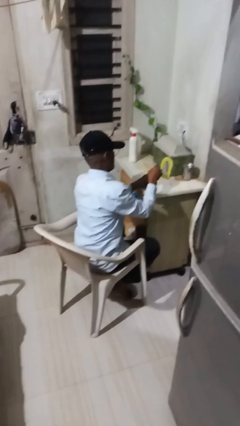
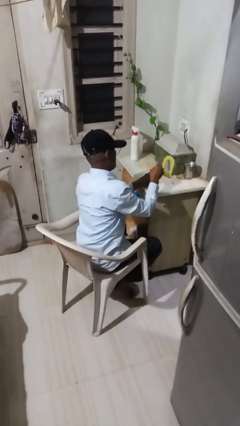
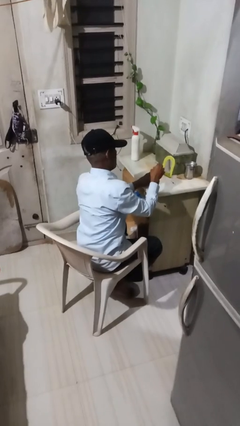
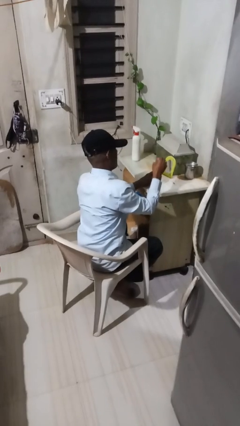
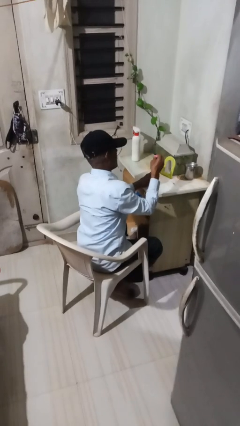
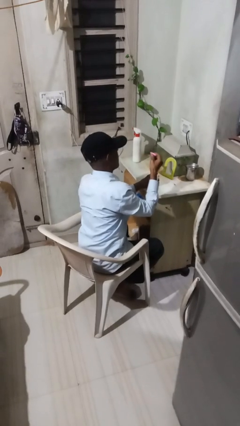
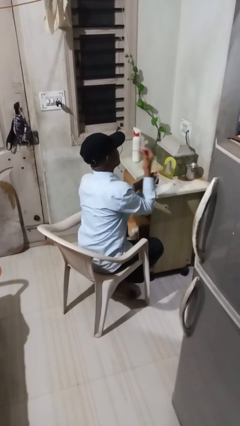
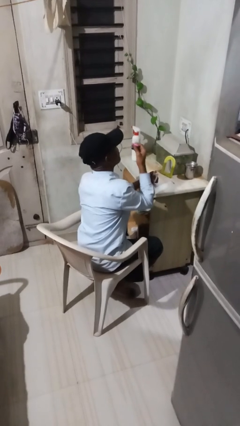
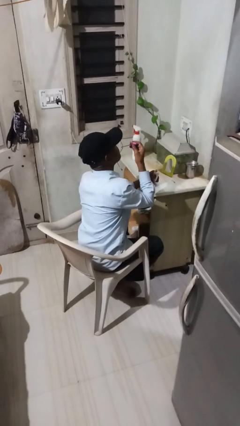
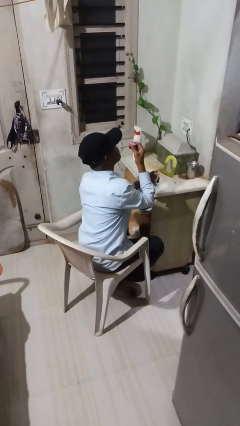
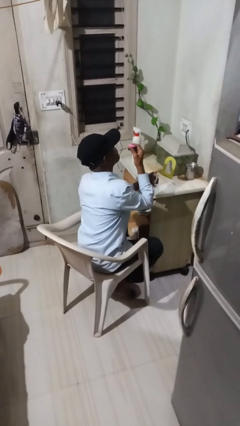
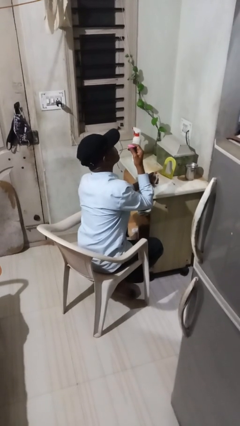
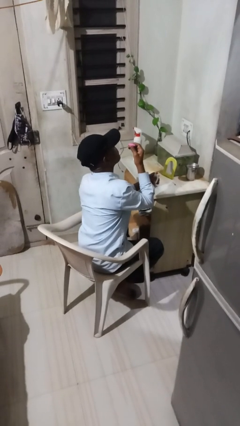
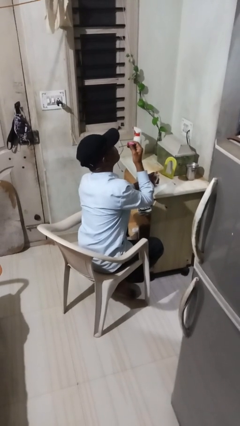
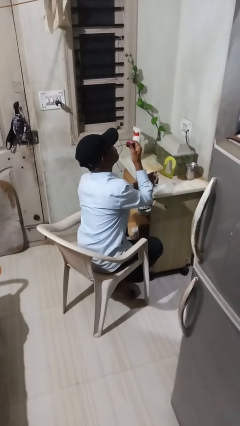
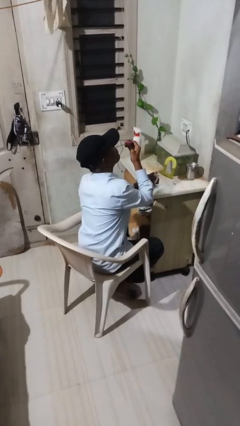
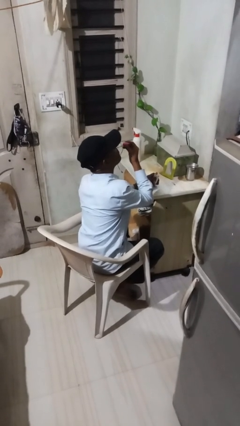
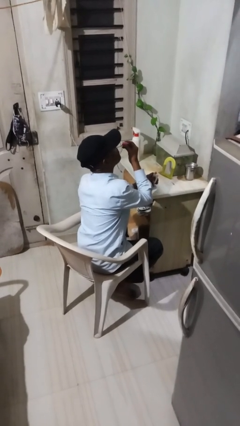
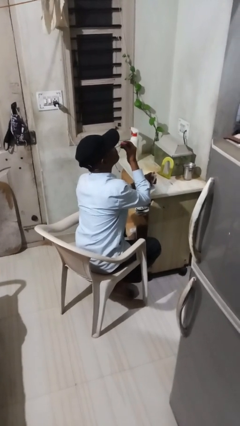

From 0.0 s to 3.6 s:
person applies lip makeup

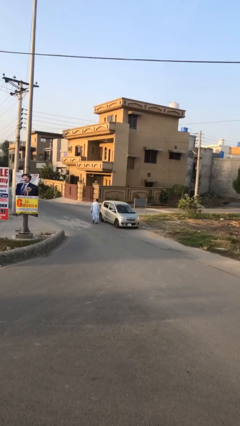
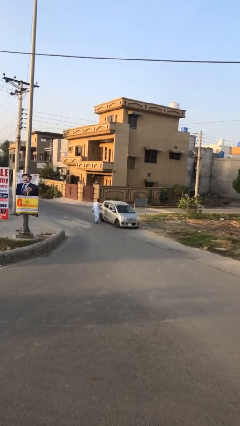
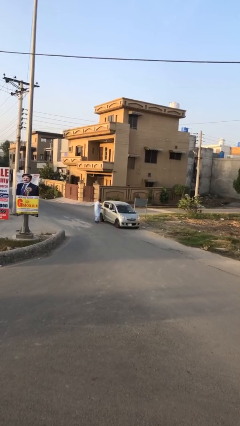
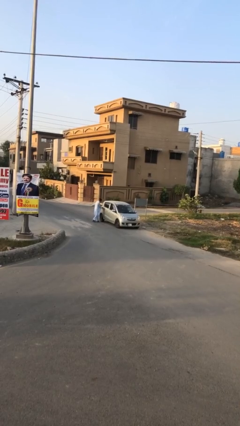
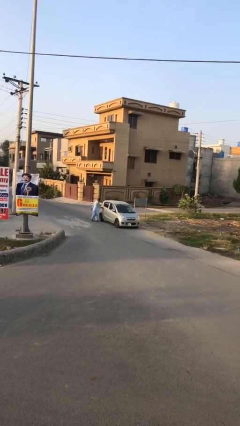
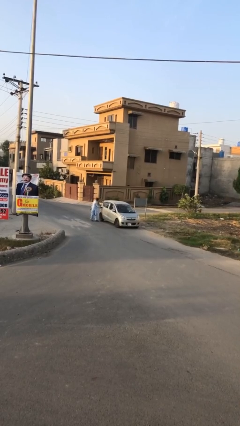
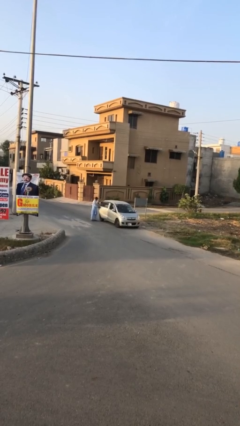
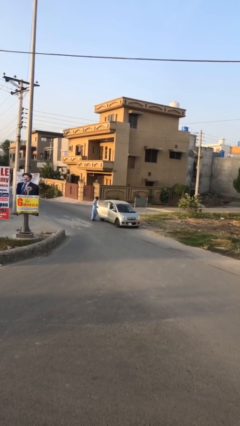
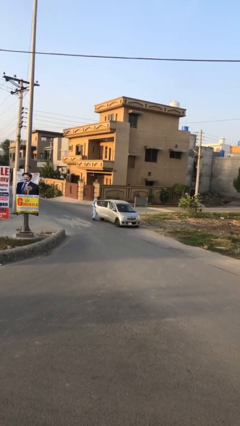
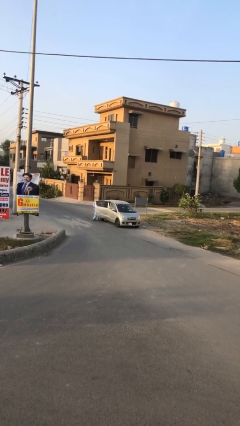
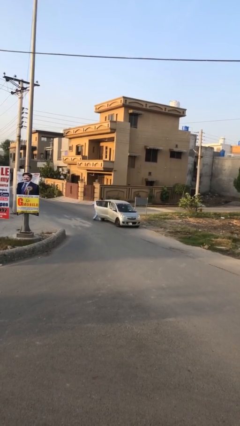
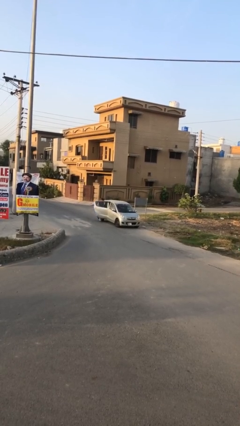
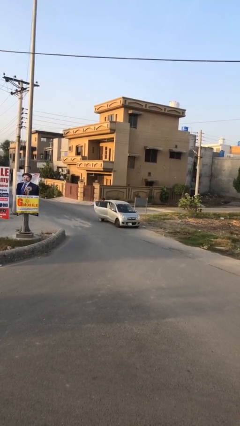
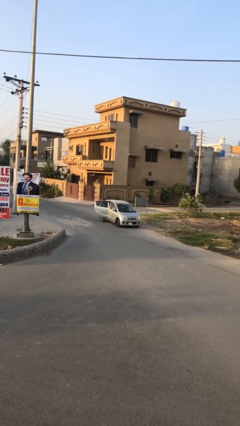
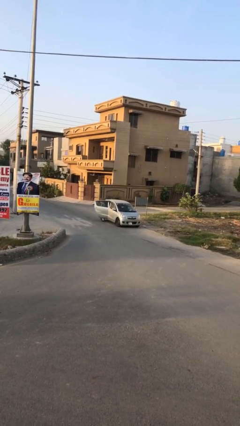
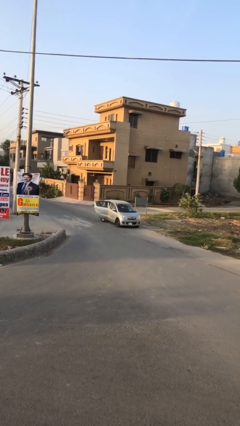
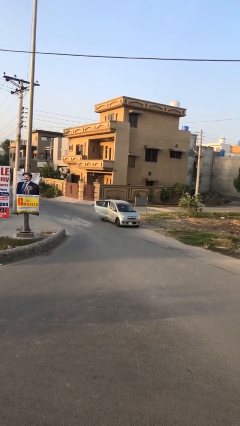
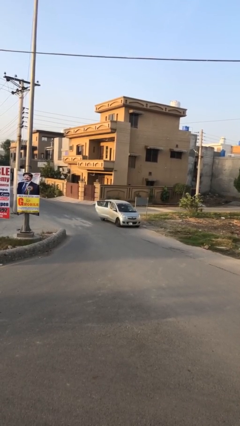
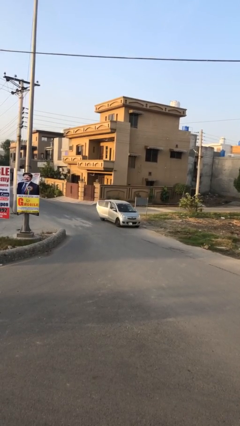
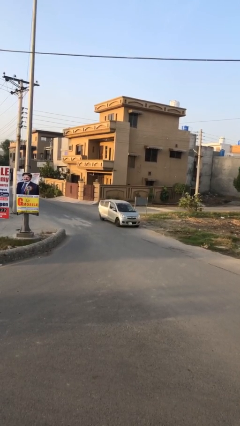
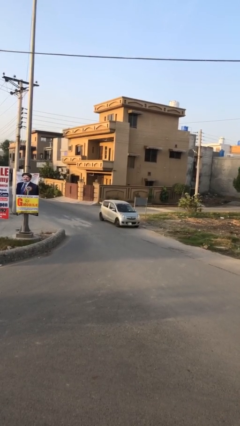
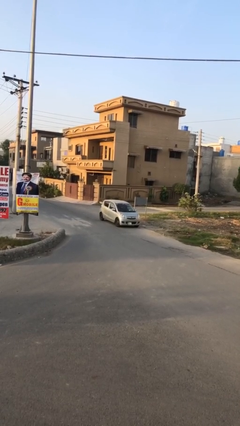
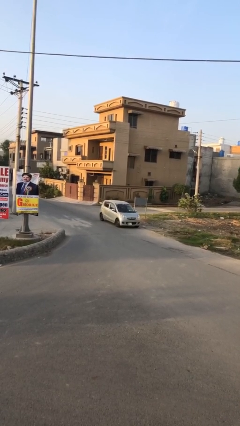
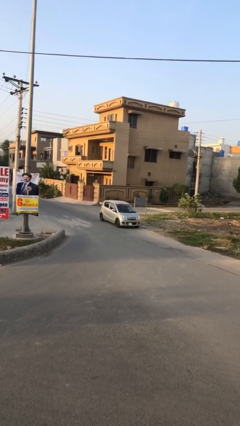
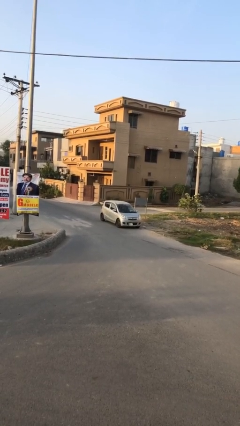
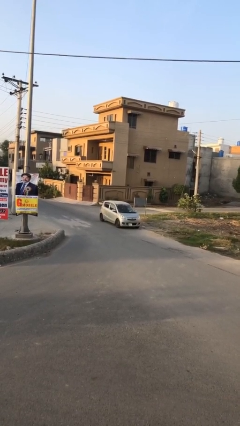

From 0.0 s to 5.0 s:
car picks up person

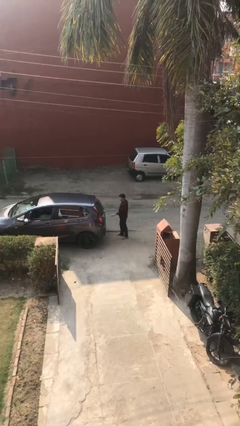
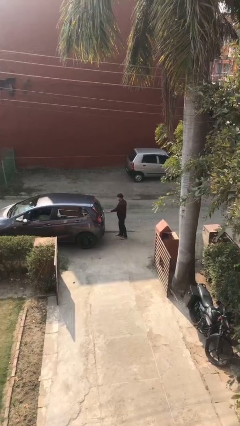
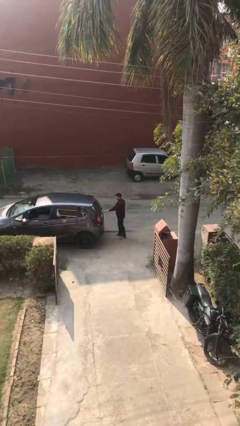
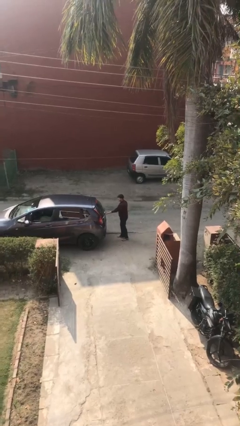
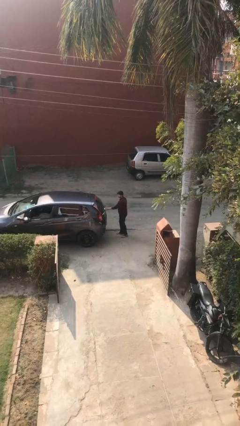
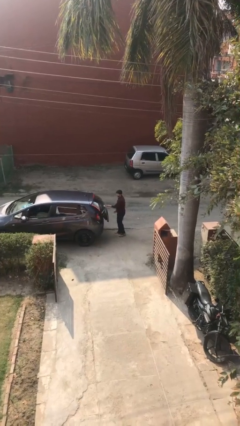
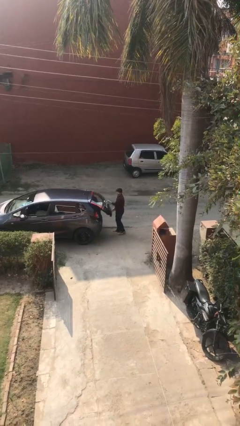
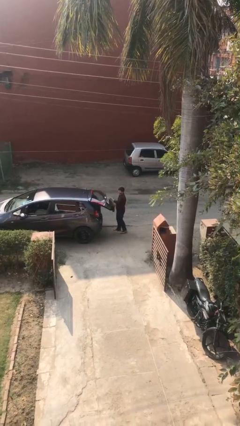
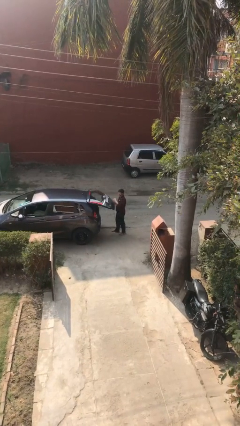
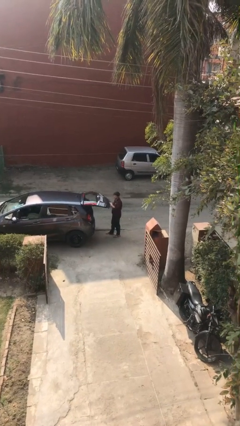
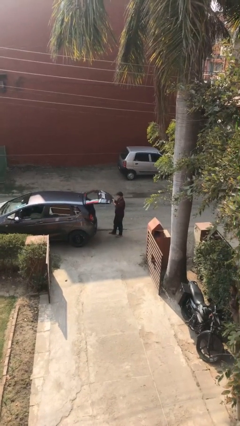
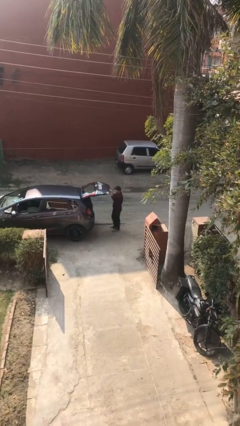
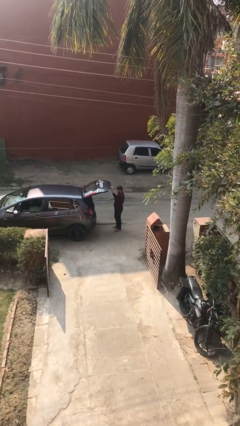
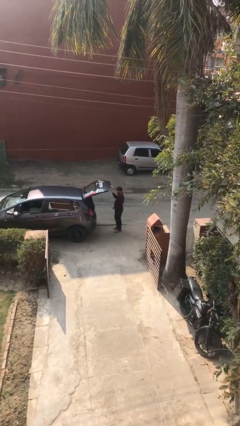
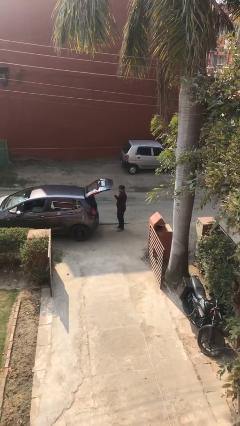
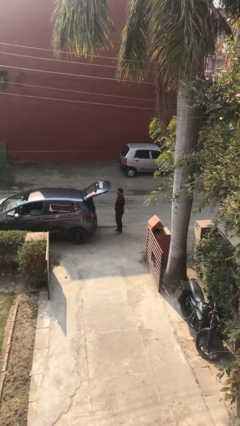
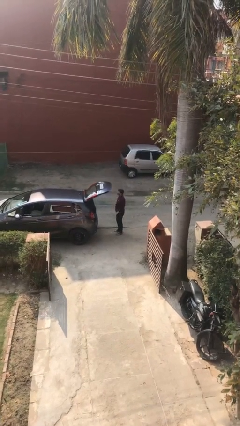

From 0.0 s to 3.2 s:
person opens car trunk

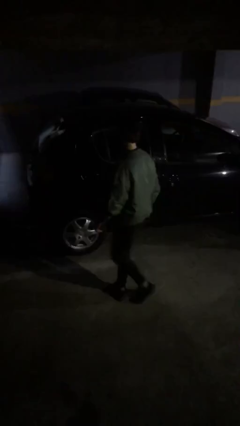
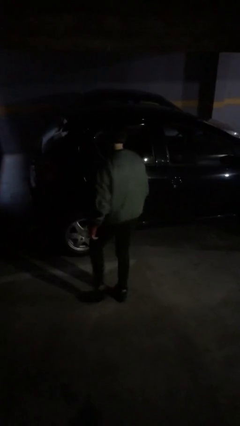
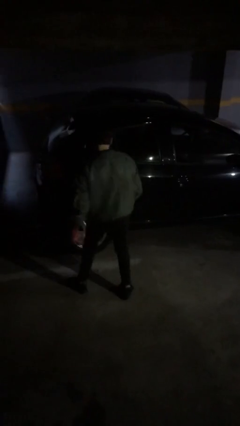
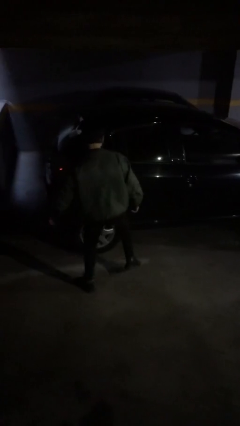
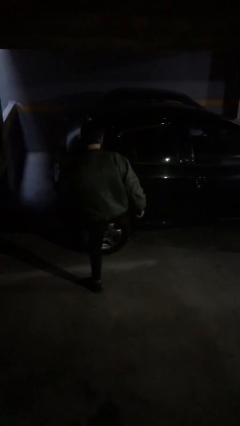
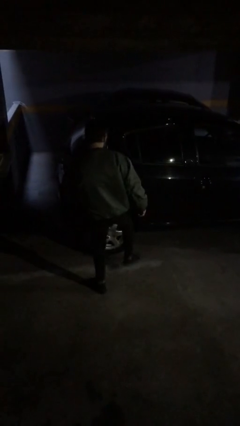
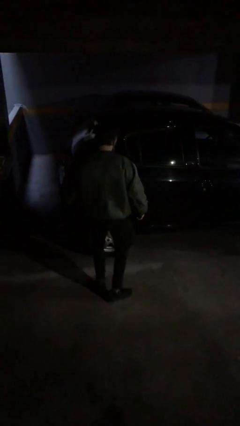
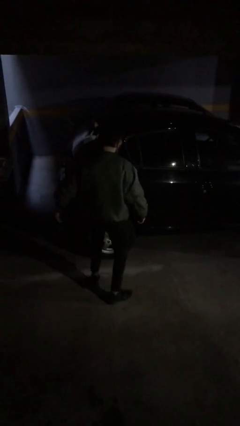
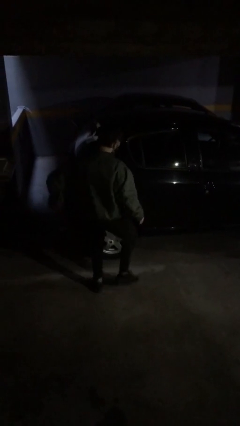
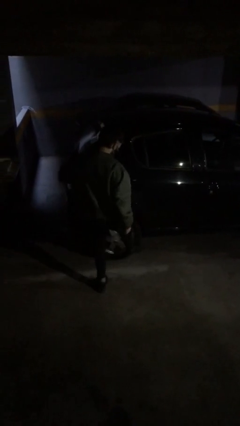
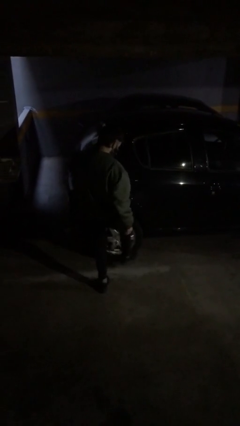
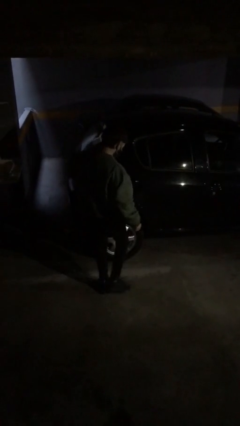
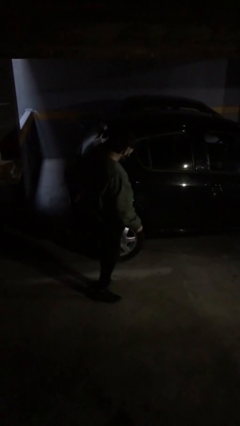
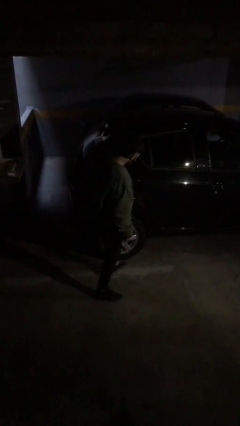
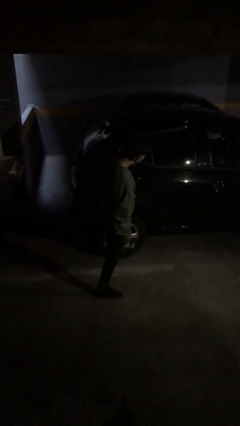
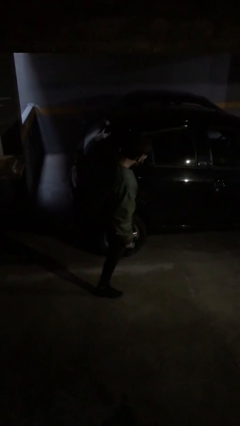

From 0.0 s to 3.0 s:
person kicks car tires

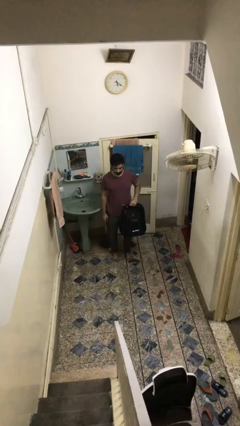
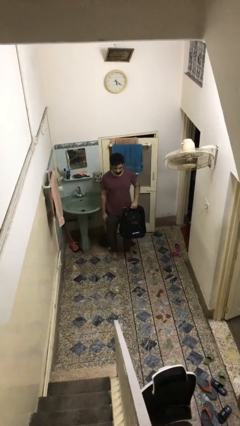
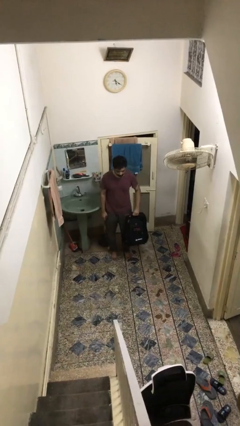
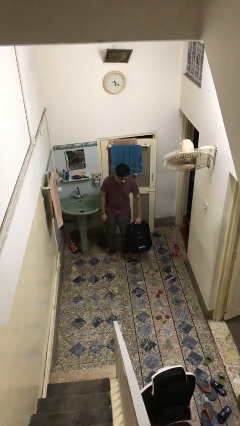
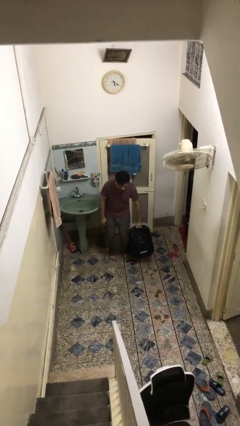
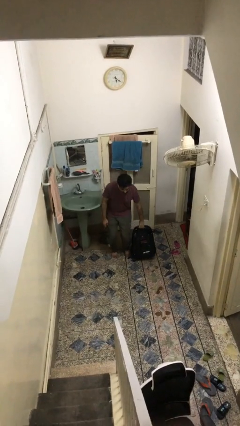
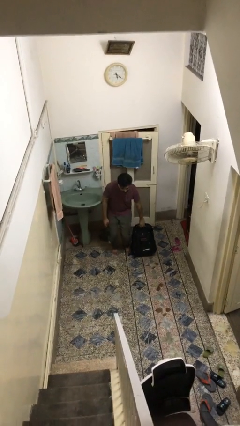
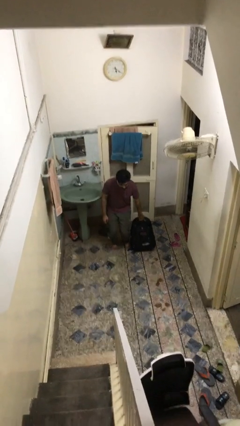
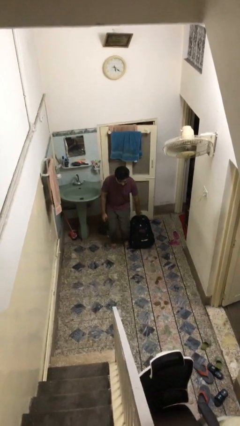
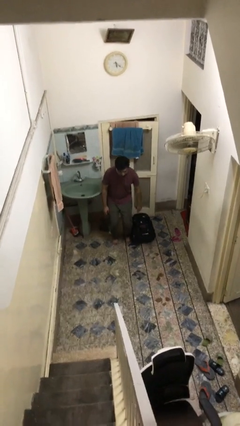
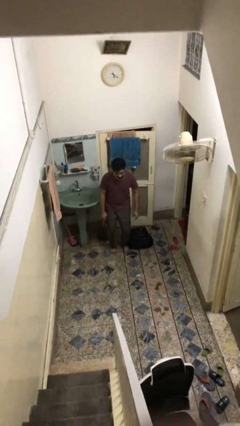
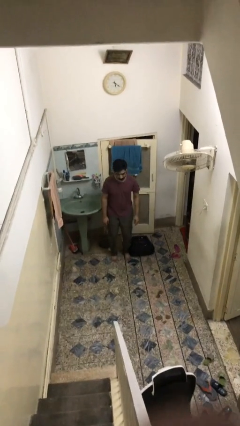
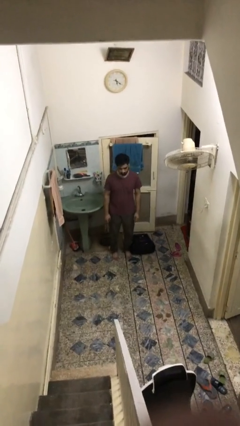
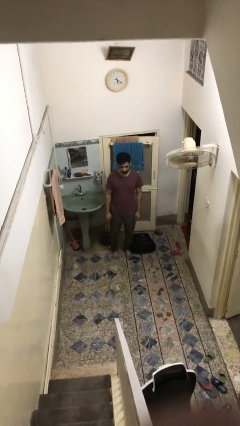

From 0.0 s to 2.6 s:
person puts down object on floor

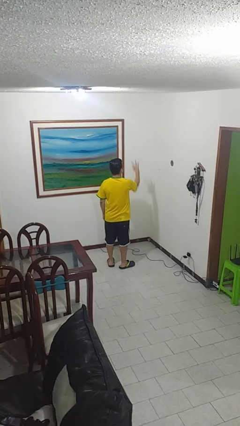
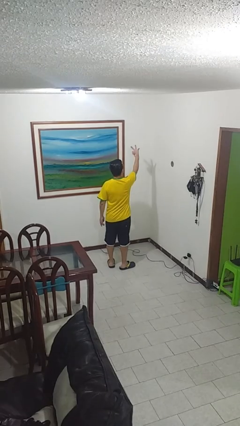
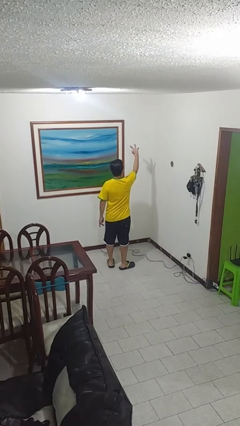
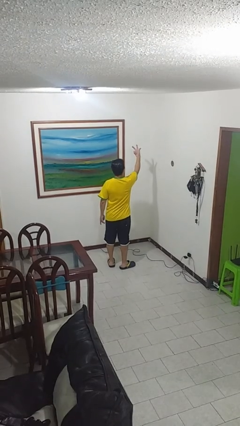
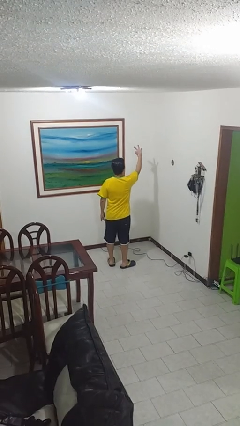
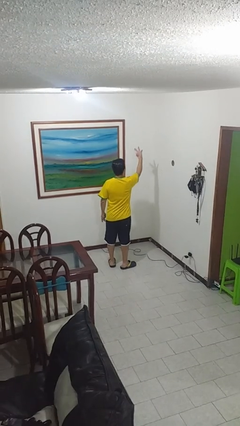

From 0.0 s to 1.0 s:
person gestures number three
